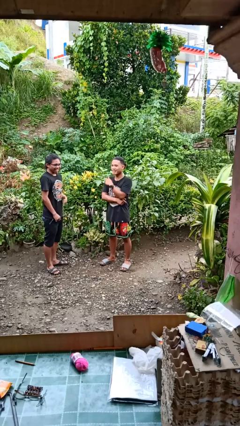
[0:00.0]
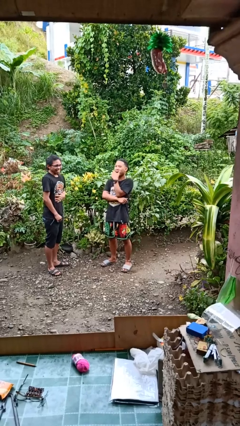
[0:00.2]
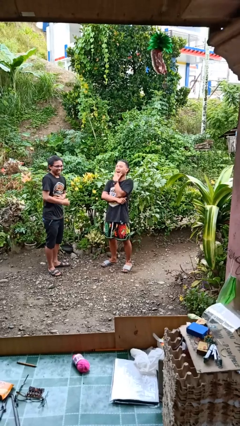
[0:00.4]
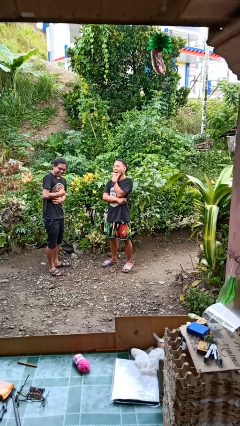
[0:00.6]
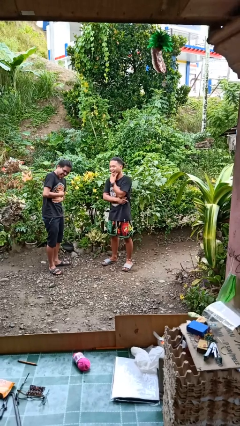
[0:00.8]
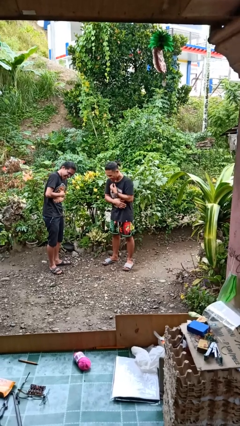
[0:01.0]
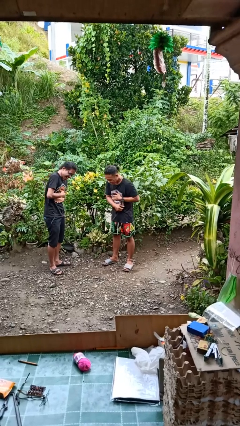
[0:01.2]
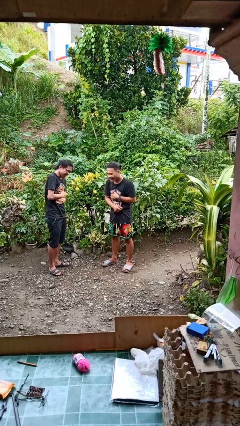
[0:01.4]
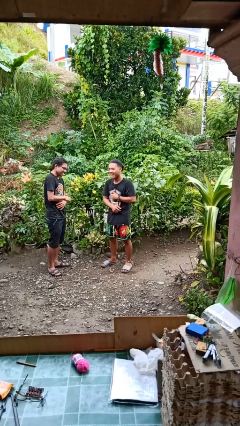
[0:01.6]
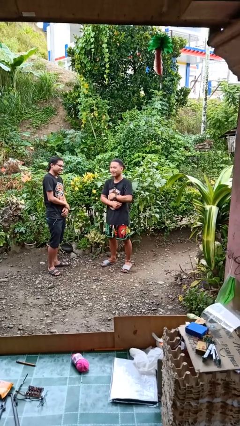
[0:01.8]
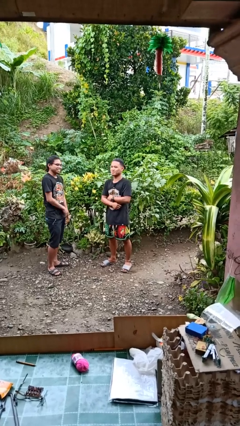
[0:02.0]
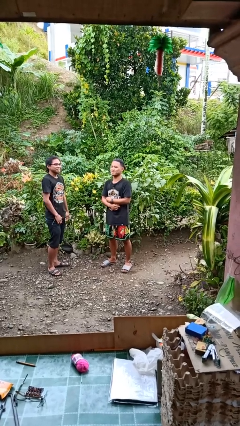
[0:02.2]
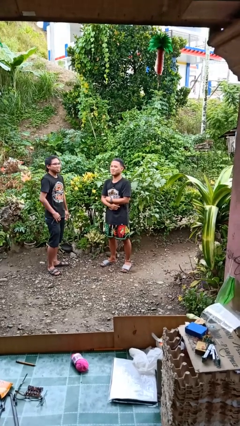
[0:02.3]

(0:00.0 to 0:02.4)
person laughs with person

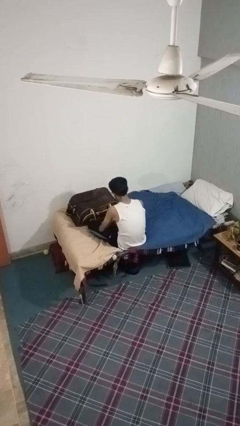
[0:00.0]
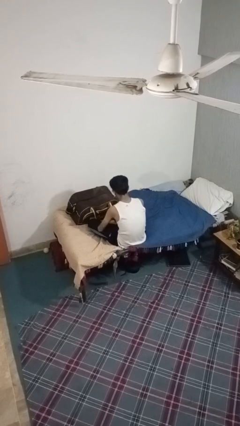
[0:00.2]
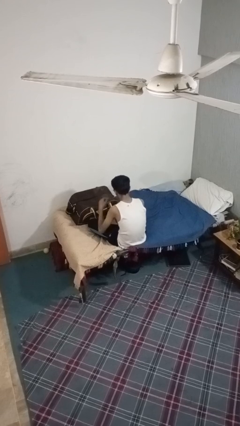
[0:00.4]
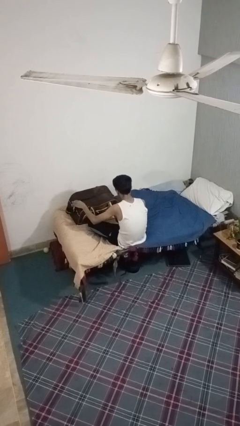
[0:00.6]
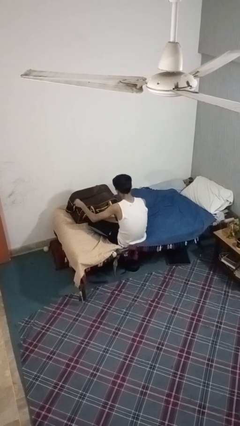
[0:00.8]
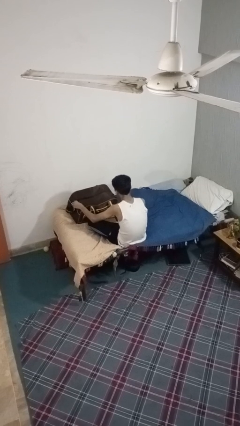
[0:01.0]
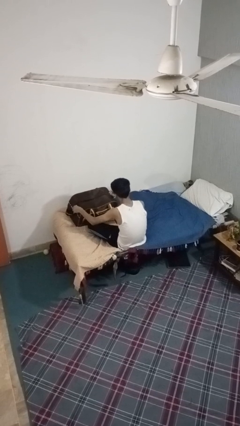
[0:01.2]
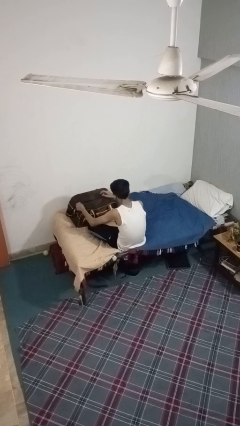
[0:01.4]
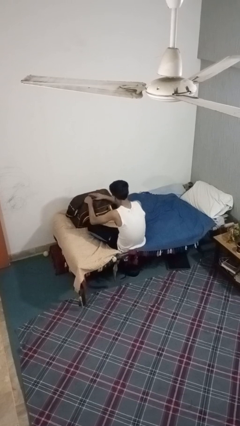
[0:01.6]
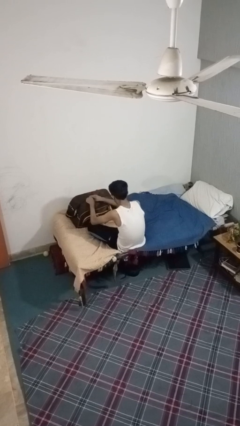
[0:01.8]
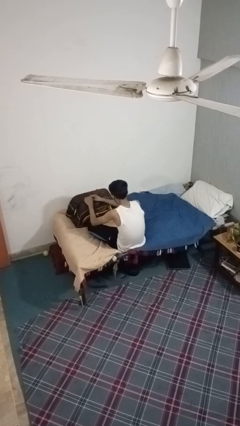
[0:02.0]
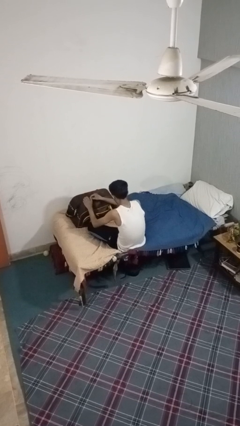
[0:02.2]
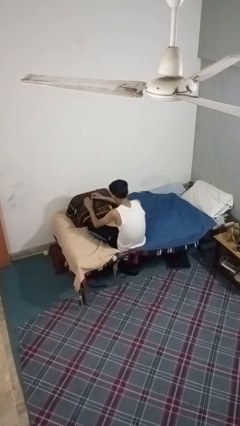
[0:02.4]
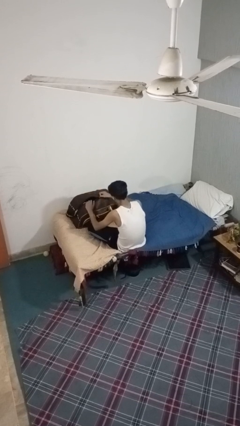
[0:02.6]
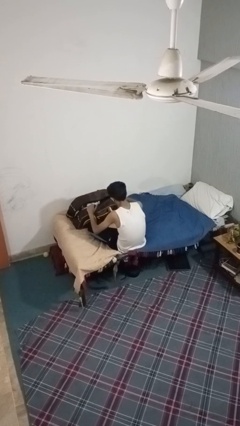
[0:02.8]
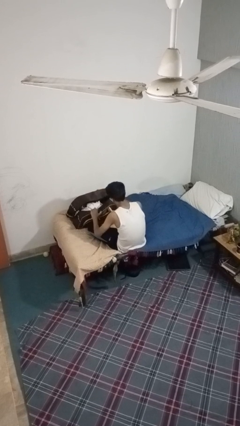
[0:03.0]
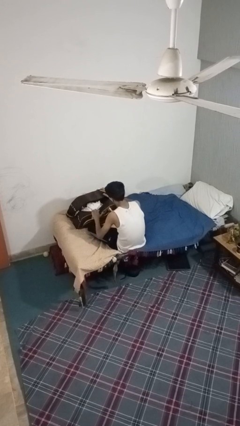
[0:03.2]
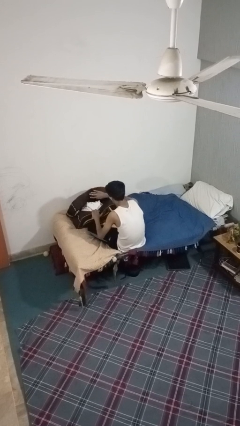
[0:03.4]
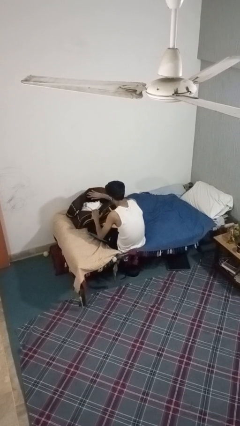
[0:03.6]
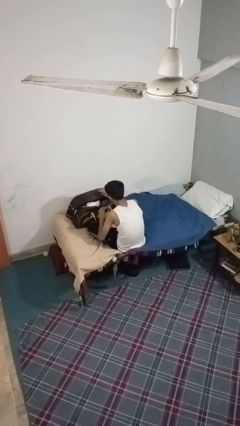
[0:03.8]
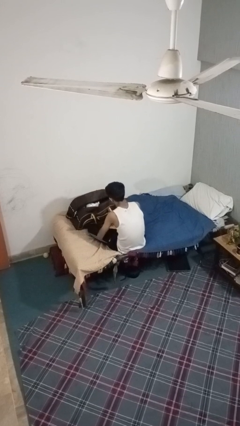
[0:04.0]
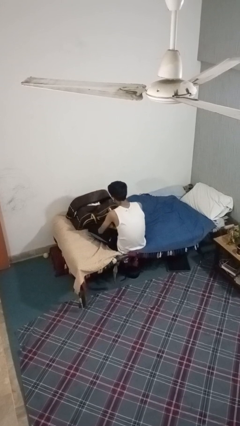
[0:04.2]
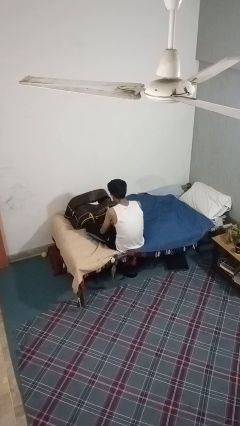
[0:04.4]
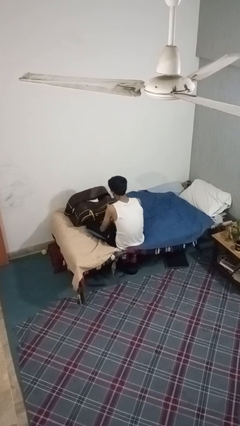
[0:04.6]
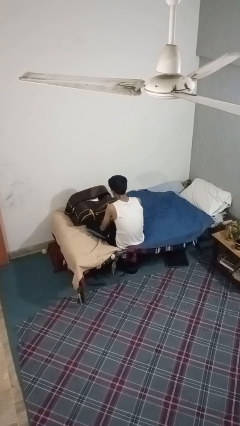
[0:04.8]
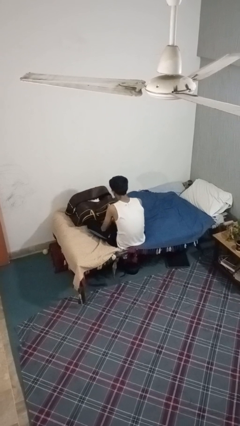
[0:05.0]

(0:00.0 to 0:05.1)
person opens suitcase

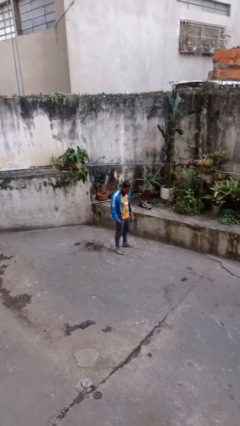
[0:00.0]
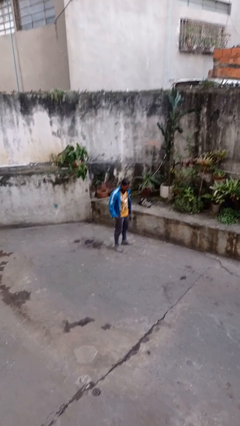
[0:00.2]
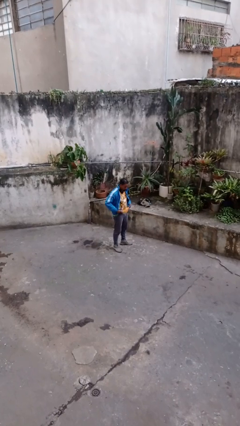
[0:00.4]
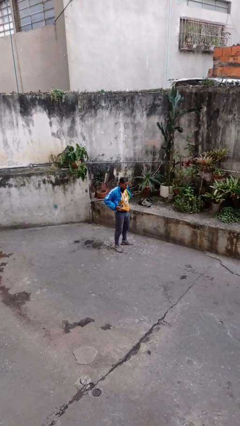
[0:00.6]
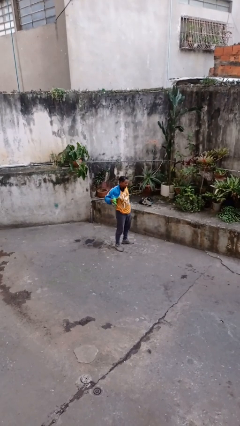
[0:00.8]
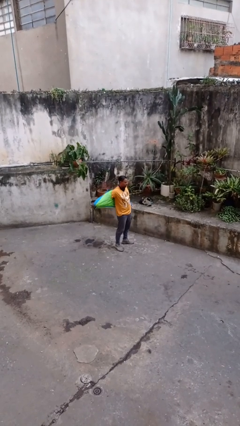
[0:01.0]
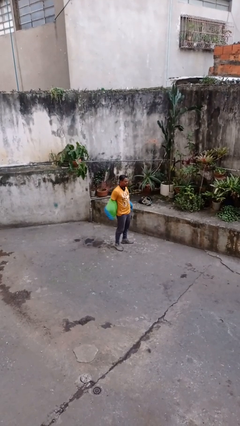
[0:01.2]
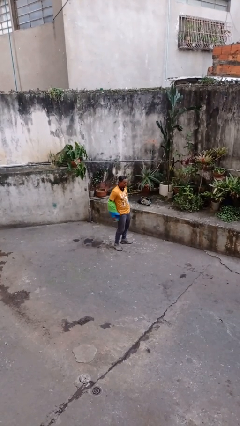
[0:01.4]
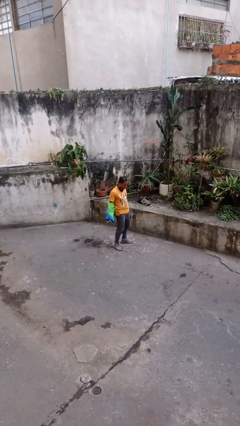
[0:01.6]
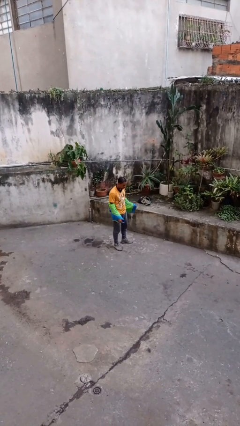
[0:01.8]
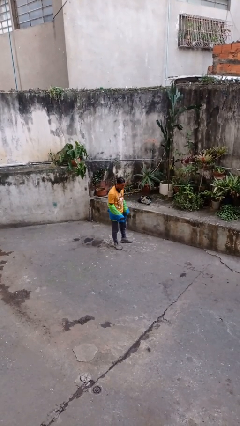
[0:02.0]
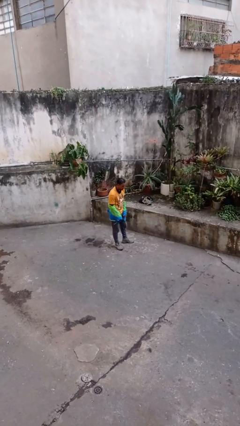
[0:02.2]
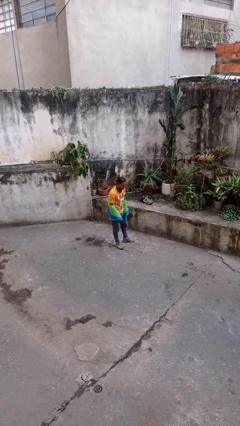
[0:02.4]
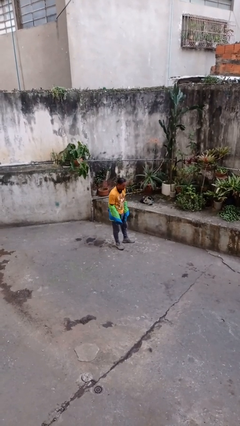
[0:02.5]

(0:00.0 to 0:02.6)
person takes off jacket

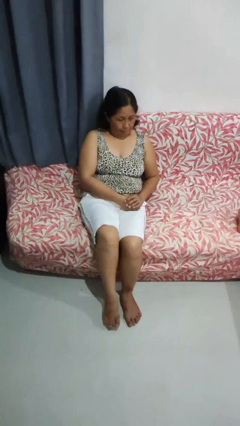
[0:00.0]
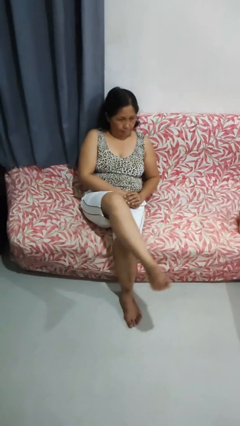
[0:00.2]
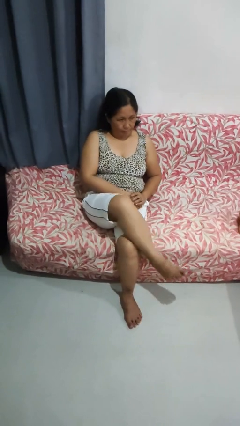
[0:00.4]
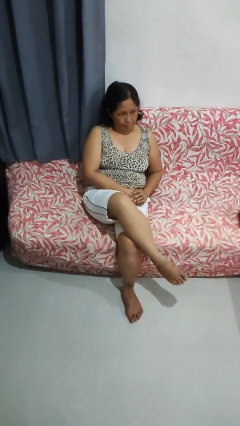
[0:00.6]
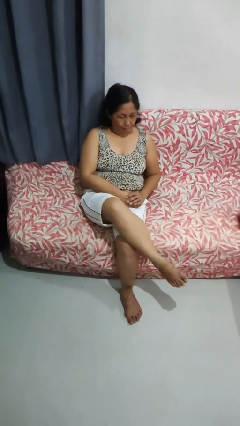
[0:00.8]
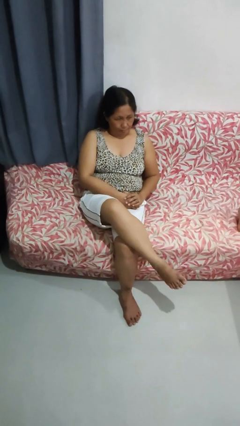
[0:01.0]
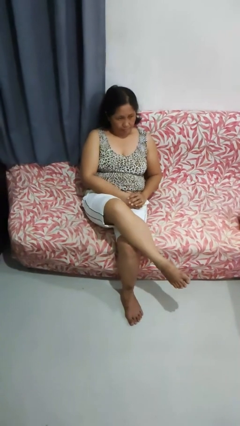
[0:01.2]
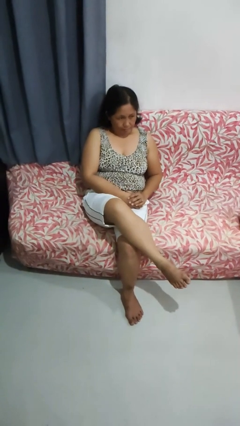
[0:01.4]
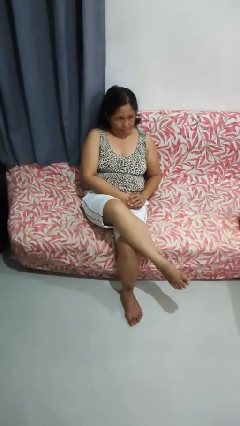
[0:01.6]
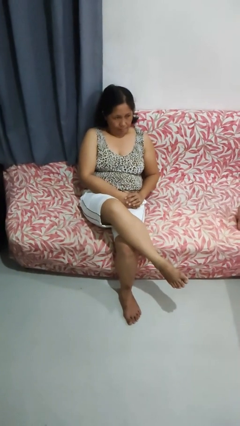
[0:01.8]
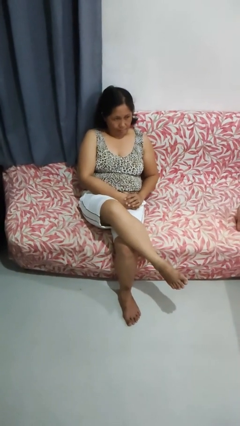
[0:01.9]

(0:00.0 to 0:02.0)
person crosses legs

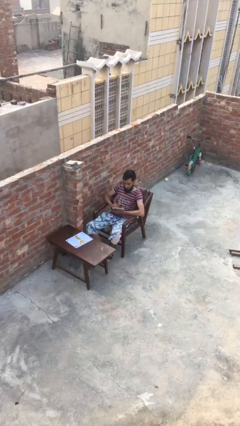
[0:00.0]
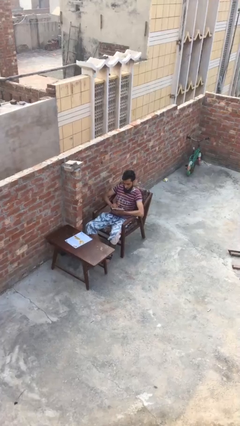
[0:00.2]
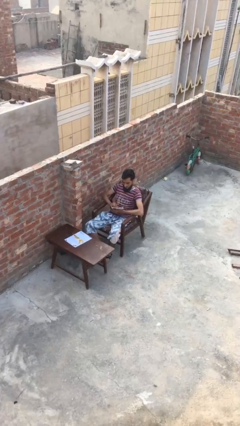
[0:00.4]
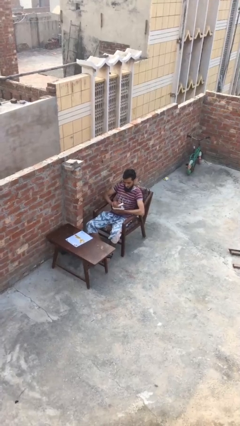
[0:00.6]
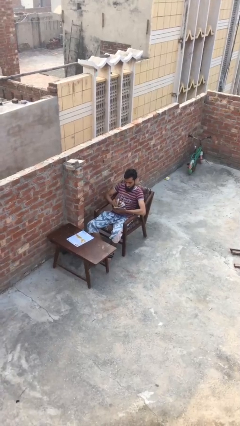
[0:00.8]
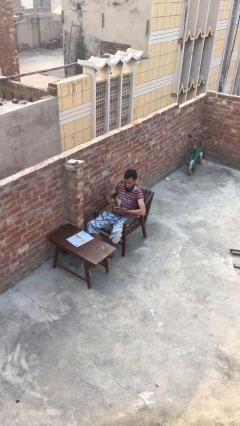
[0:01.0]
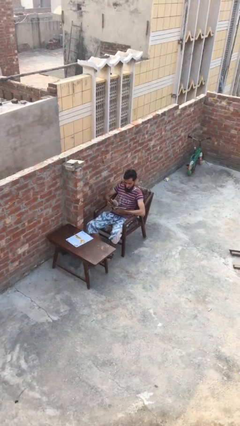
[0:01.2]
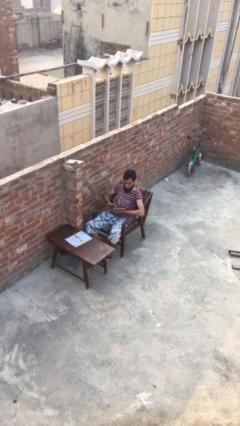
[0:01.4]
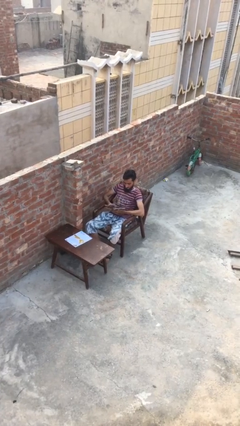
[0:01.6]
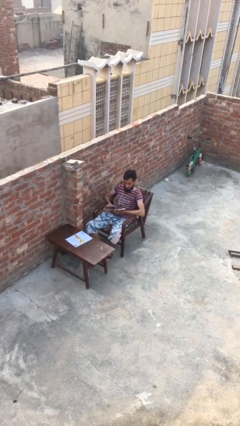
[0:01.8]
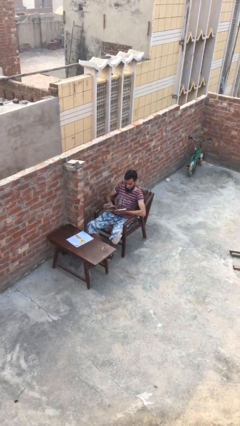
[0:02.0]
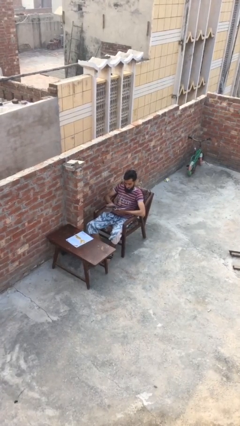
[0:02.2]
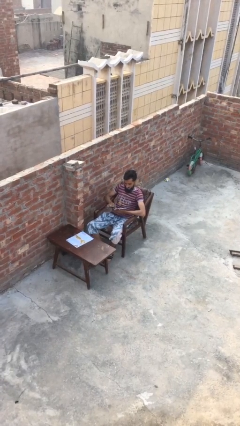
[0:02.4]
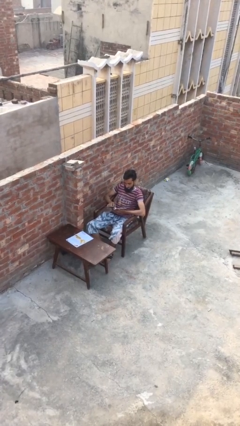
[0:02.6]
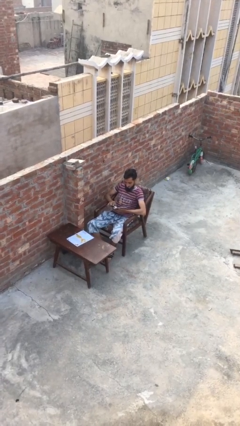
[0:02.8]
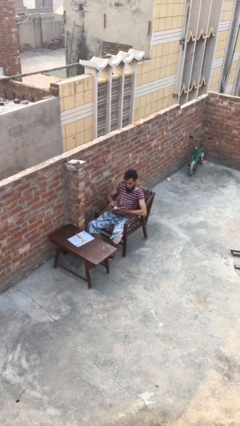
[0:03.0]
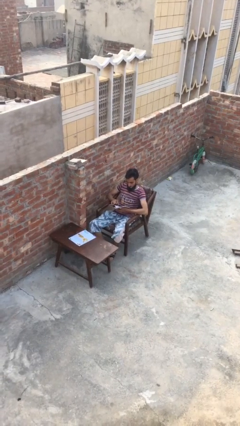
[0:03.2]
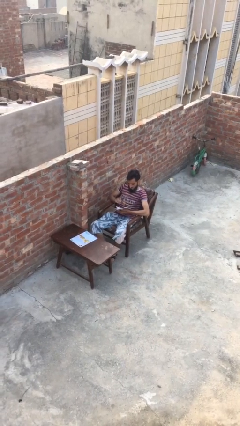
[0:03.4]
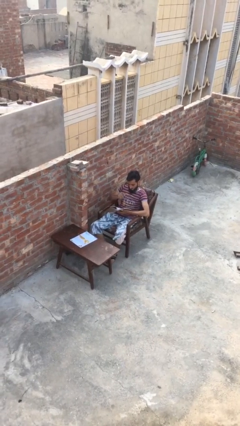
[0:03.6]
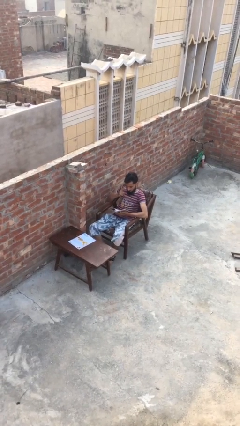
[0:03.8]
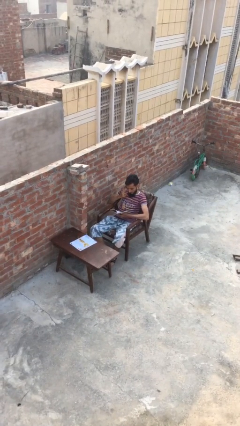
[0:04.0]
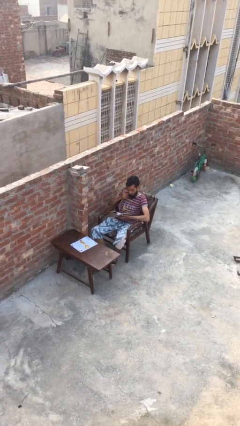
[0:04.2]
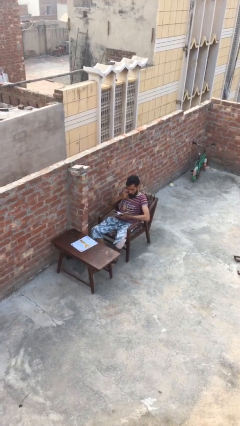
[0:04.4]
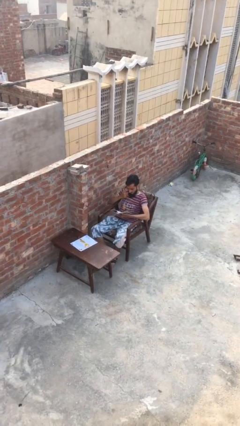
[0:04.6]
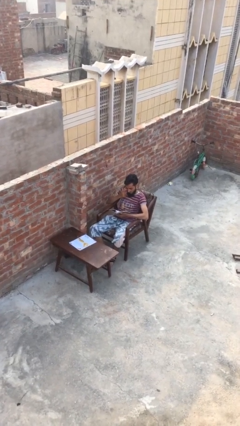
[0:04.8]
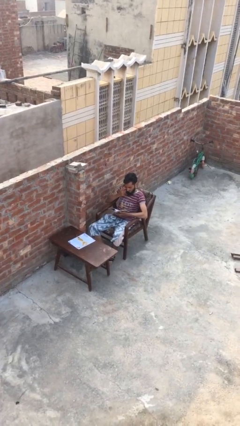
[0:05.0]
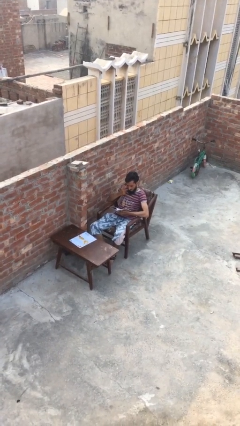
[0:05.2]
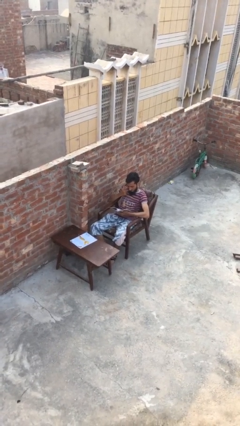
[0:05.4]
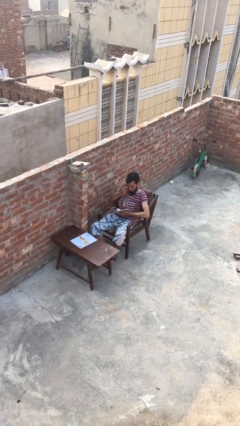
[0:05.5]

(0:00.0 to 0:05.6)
person reads document
